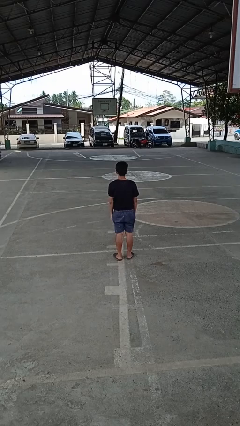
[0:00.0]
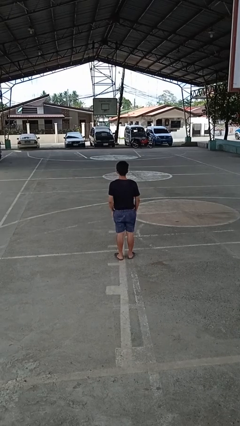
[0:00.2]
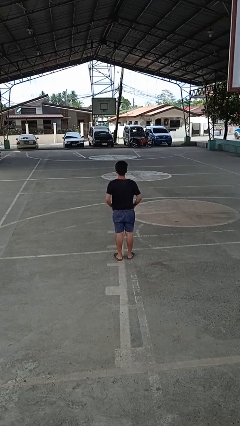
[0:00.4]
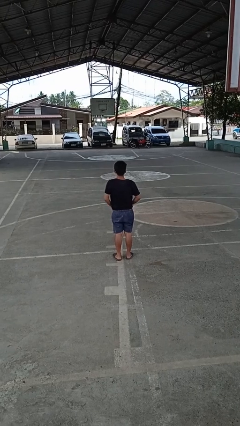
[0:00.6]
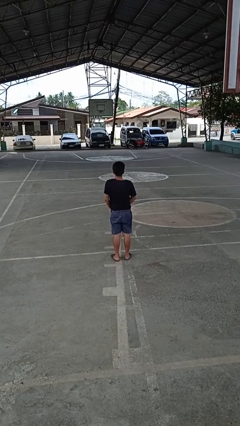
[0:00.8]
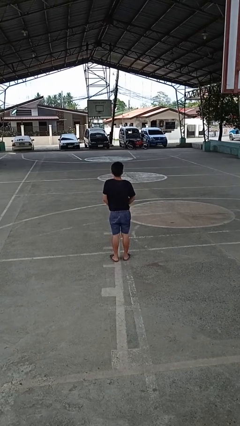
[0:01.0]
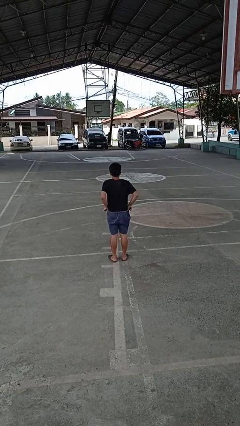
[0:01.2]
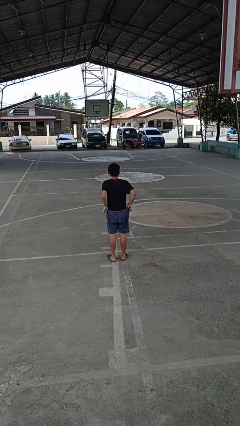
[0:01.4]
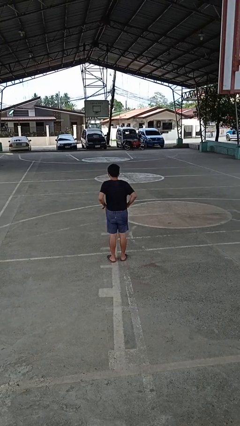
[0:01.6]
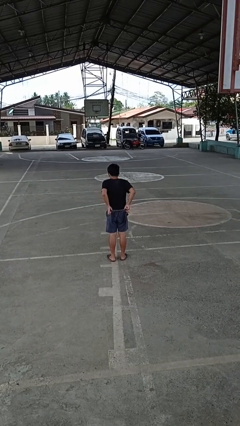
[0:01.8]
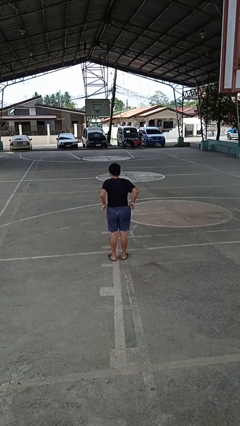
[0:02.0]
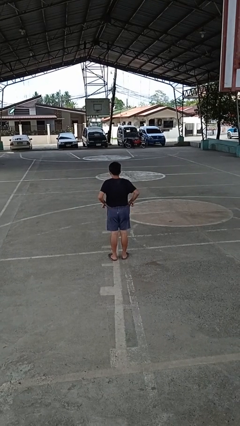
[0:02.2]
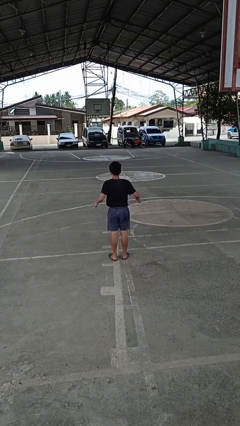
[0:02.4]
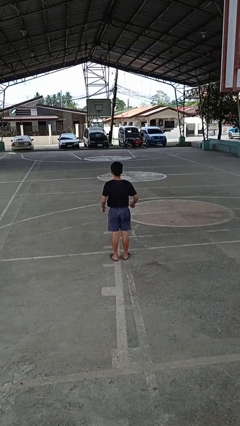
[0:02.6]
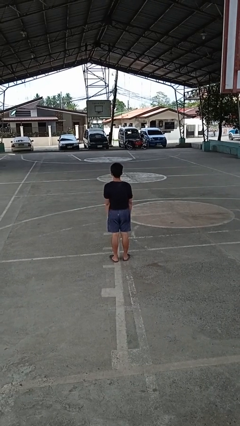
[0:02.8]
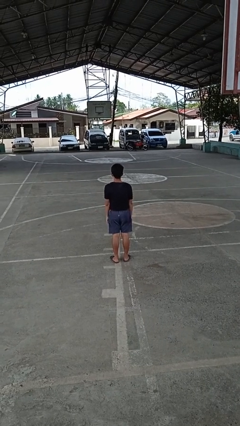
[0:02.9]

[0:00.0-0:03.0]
person hikes up pants

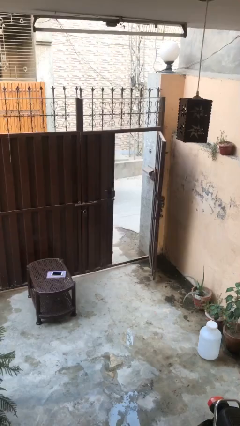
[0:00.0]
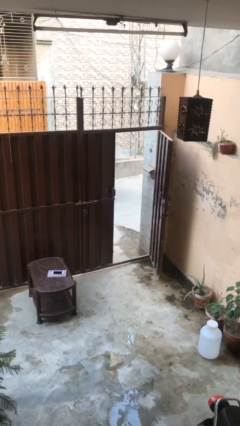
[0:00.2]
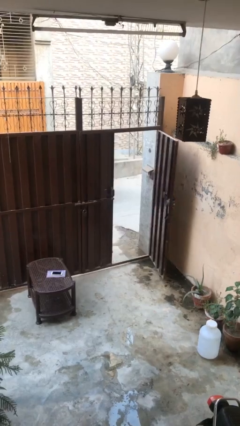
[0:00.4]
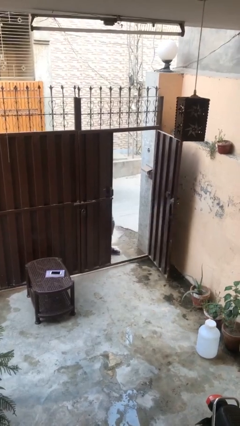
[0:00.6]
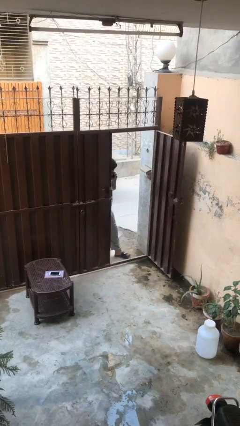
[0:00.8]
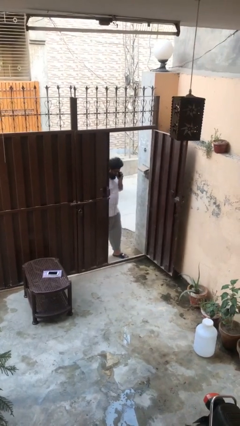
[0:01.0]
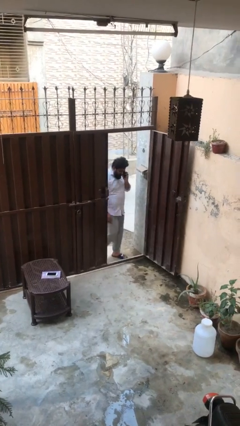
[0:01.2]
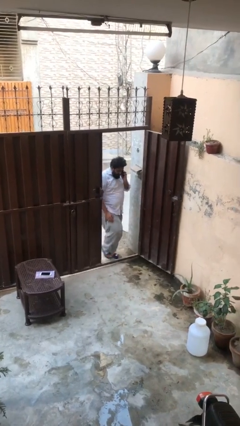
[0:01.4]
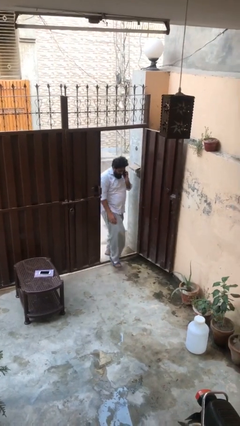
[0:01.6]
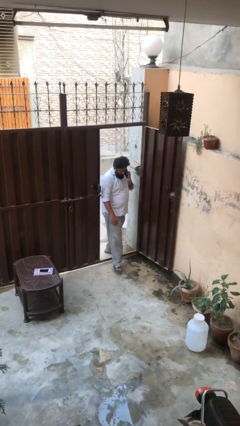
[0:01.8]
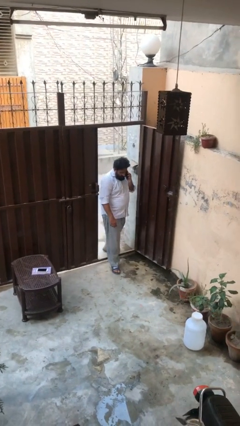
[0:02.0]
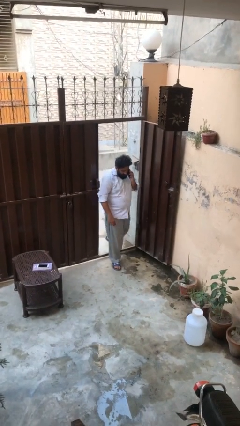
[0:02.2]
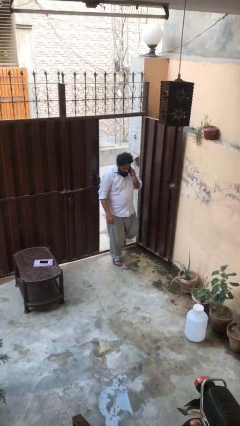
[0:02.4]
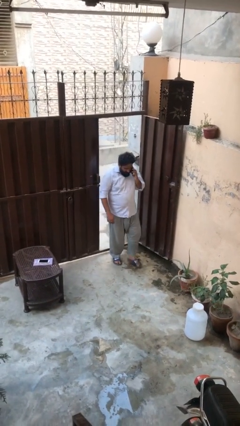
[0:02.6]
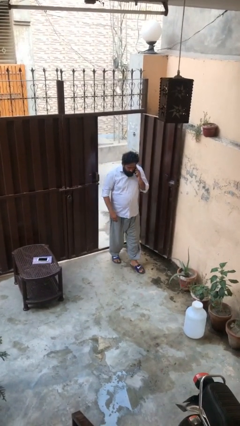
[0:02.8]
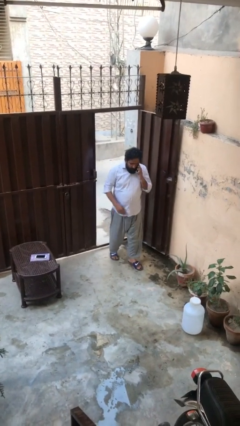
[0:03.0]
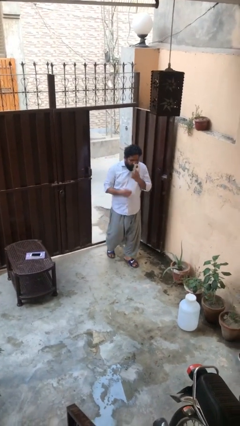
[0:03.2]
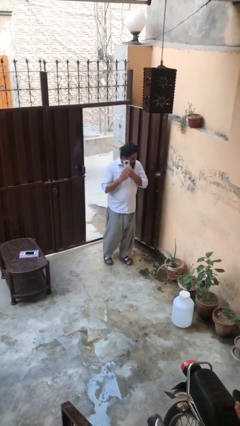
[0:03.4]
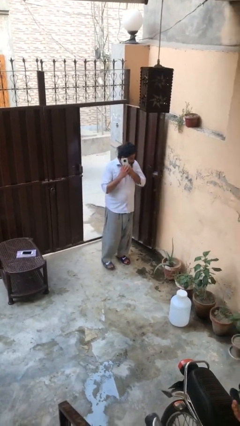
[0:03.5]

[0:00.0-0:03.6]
person enters scene through structure

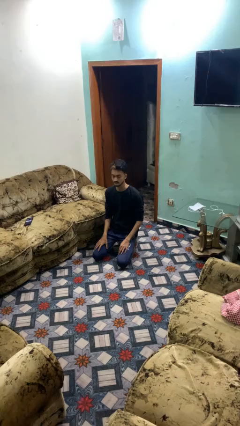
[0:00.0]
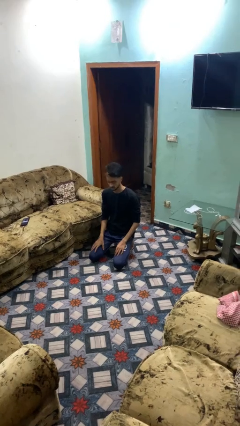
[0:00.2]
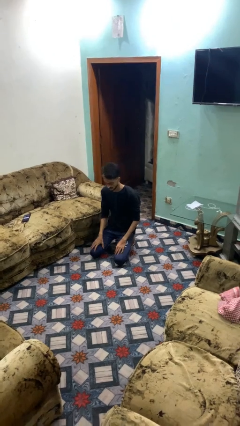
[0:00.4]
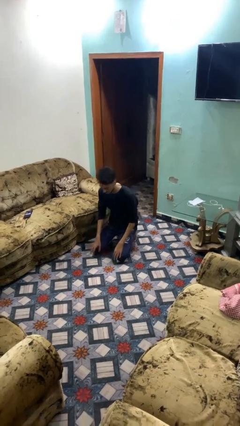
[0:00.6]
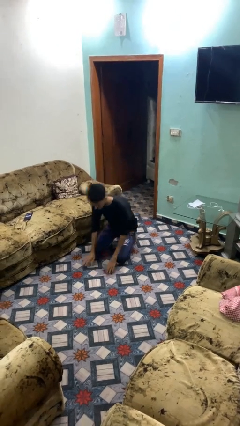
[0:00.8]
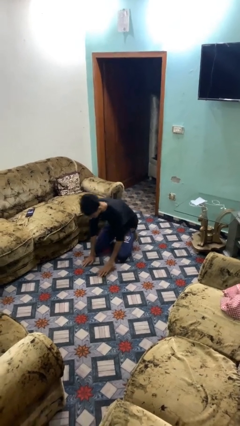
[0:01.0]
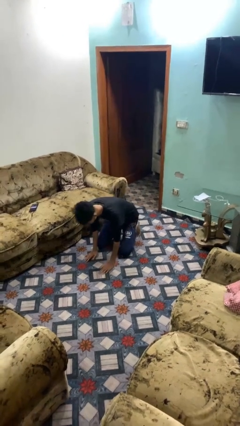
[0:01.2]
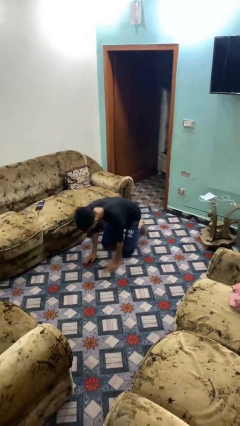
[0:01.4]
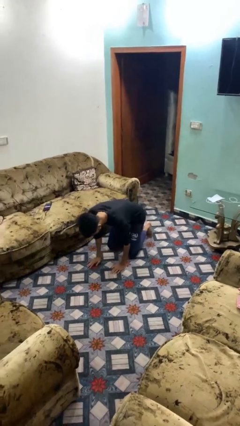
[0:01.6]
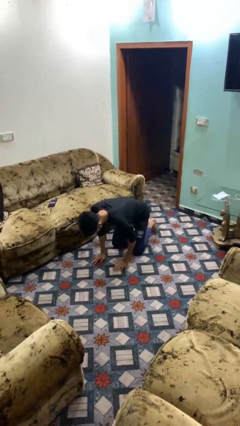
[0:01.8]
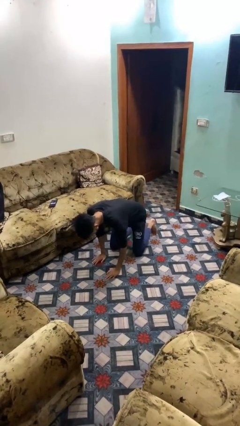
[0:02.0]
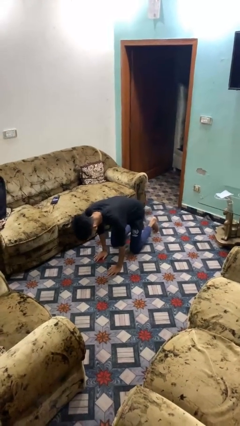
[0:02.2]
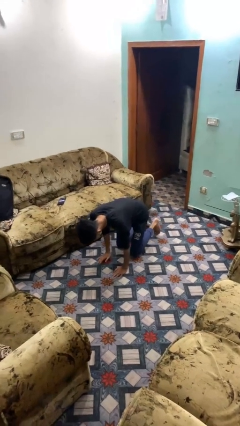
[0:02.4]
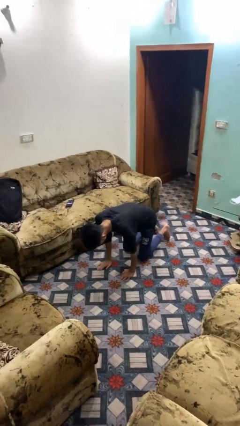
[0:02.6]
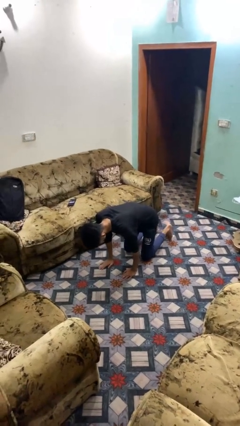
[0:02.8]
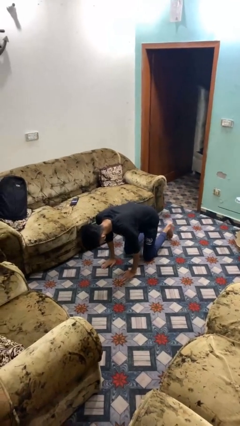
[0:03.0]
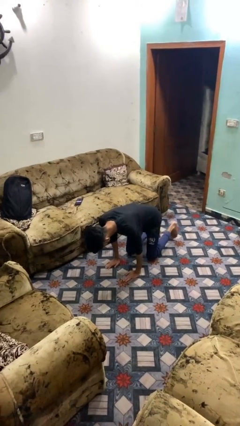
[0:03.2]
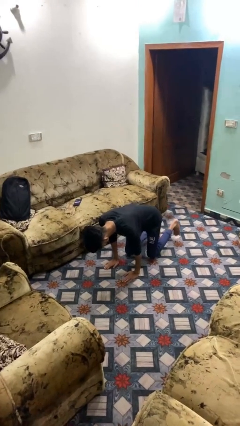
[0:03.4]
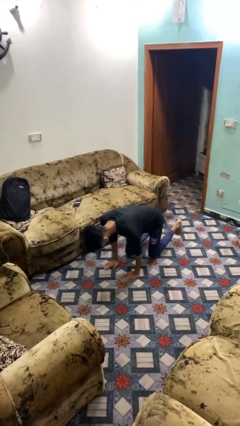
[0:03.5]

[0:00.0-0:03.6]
person crawls

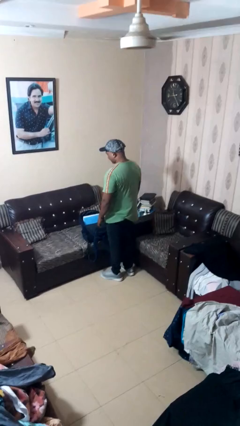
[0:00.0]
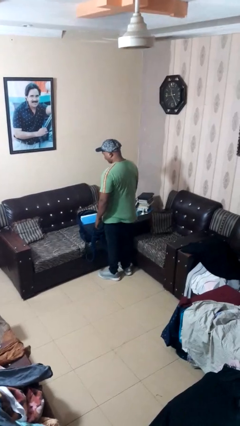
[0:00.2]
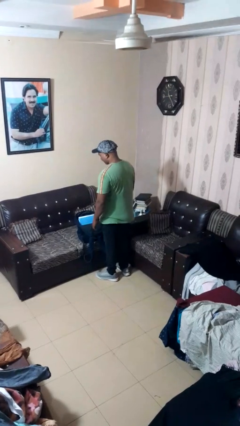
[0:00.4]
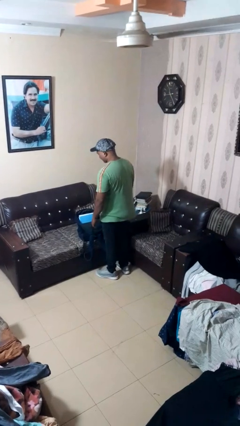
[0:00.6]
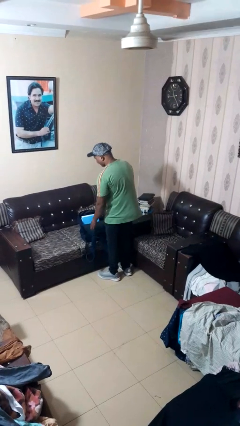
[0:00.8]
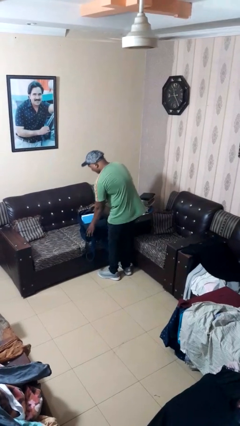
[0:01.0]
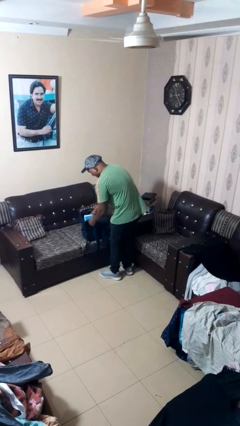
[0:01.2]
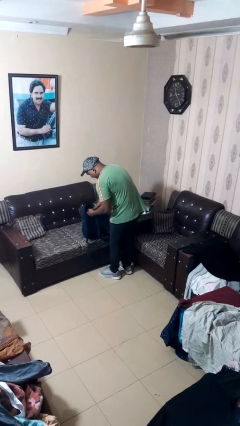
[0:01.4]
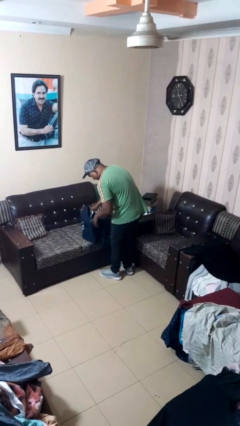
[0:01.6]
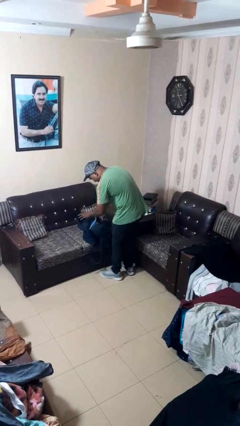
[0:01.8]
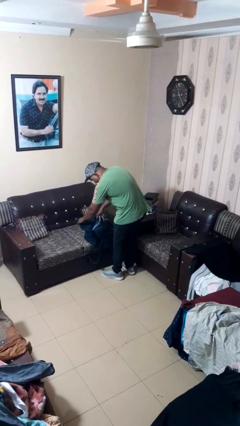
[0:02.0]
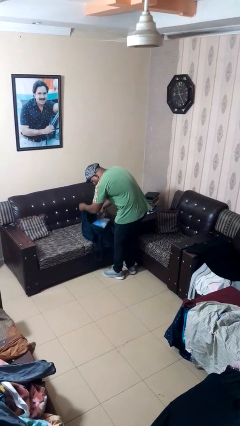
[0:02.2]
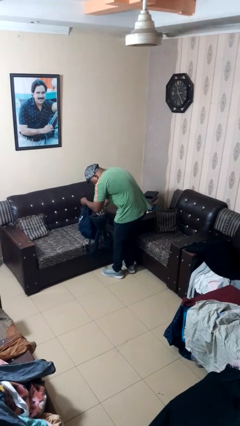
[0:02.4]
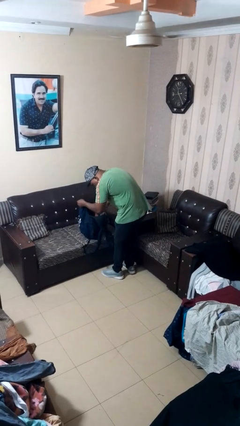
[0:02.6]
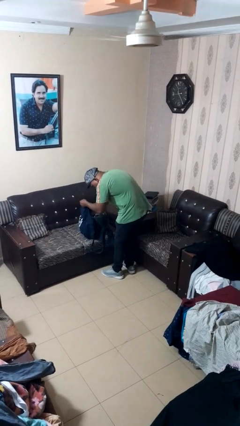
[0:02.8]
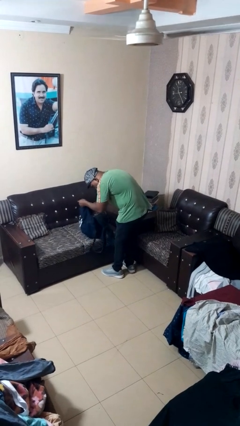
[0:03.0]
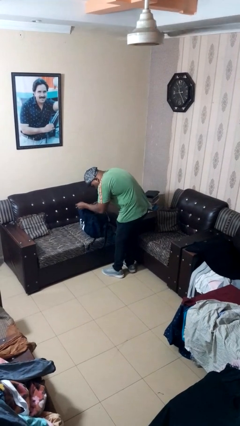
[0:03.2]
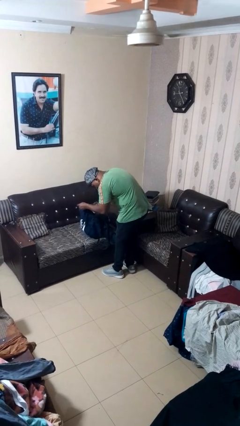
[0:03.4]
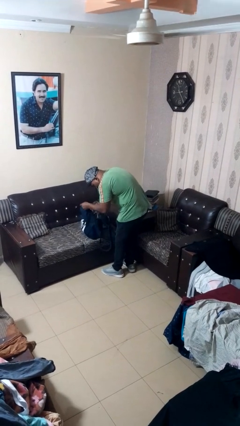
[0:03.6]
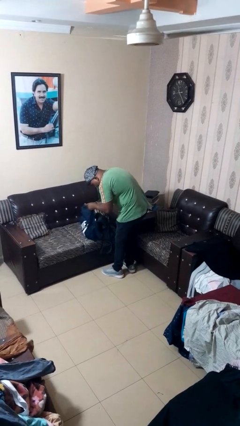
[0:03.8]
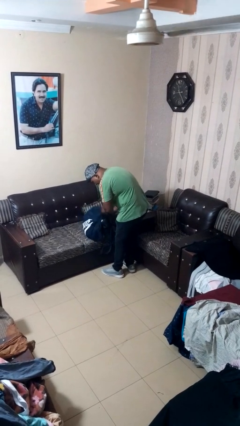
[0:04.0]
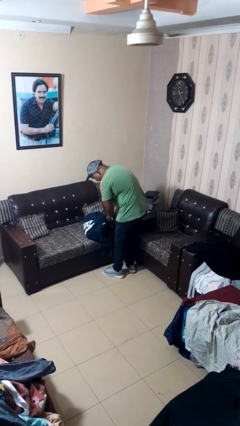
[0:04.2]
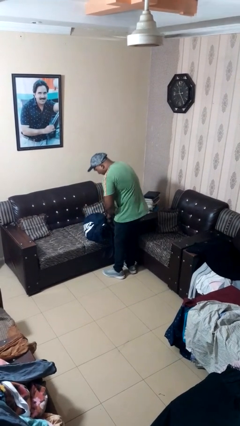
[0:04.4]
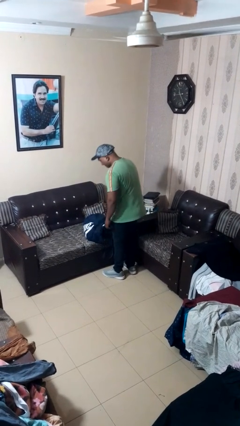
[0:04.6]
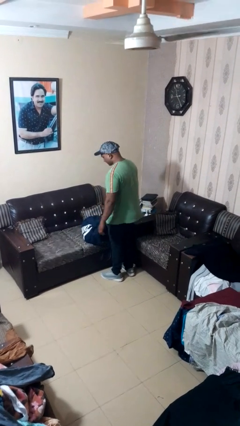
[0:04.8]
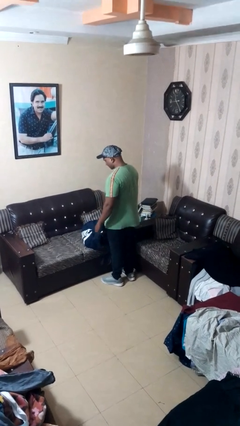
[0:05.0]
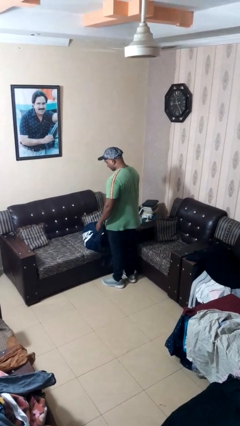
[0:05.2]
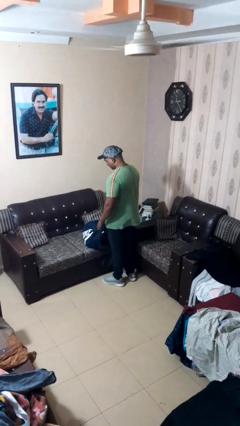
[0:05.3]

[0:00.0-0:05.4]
person searches in bag

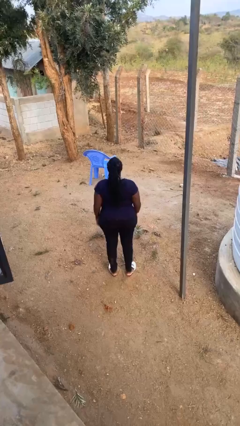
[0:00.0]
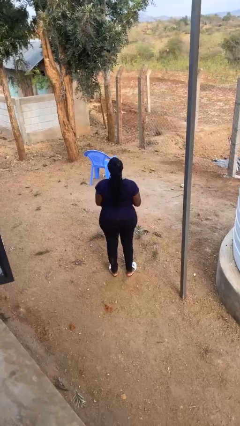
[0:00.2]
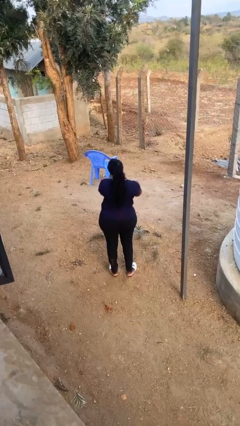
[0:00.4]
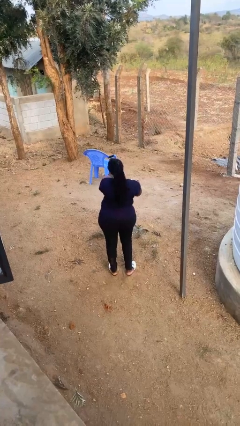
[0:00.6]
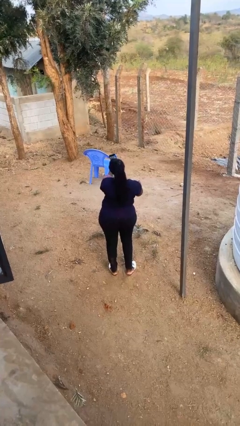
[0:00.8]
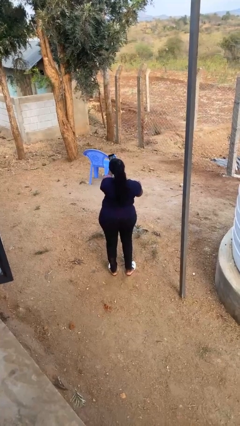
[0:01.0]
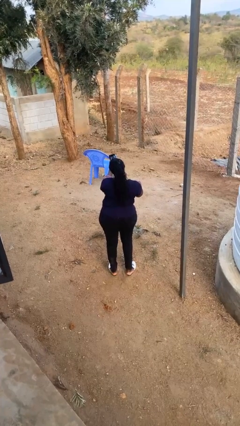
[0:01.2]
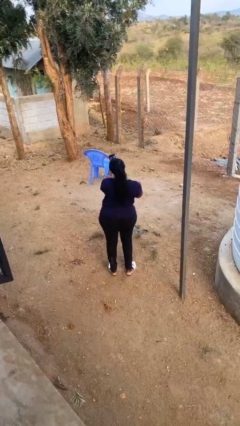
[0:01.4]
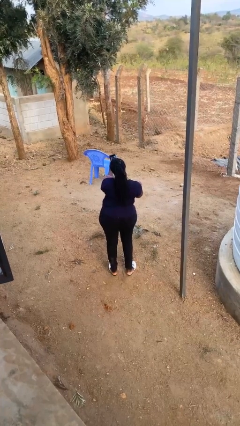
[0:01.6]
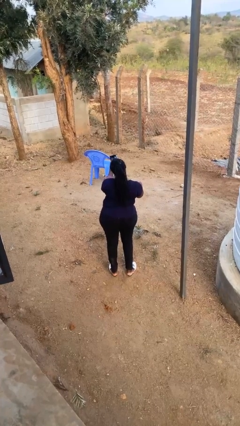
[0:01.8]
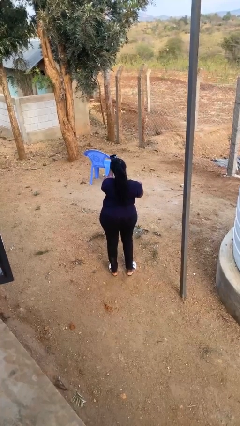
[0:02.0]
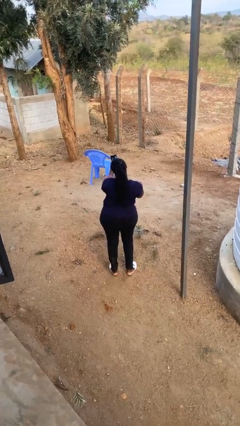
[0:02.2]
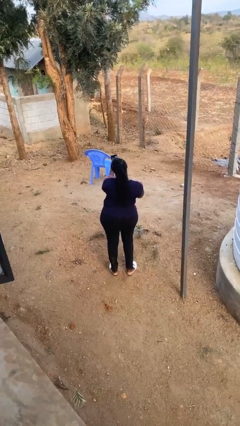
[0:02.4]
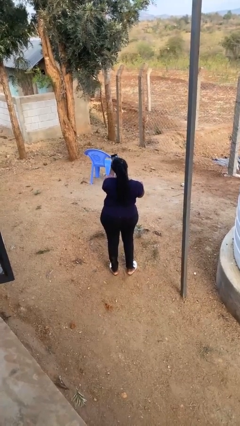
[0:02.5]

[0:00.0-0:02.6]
person takes selfie
